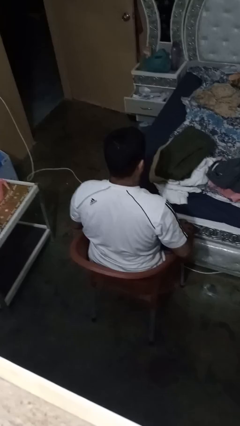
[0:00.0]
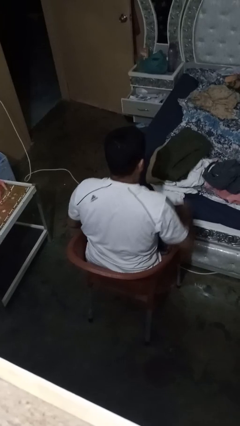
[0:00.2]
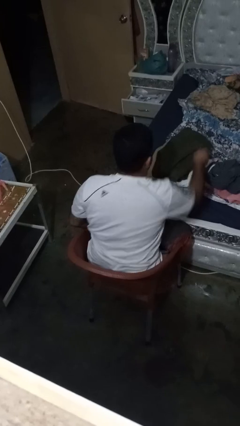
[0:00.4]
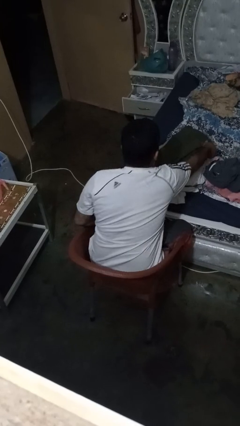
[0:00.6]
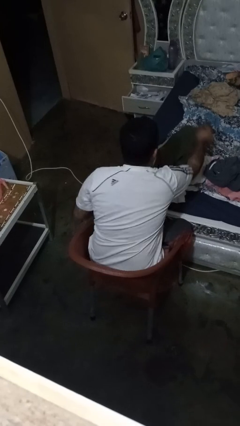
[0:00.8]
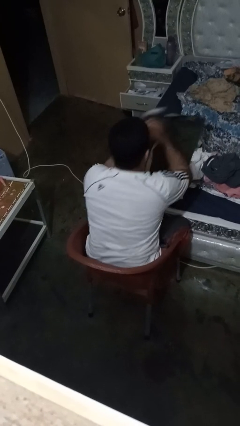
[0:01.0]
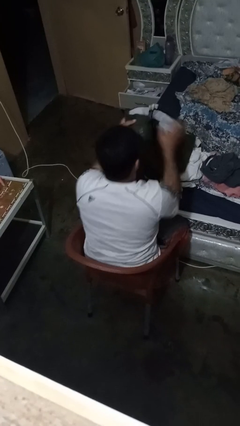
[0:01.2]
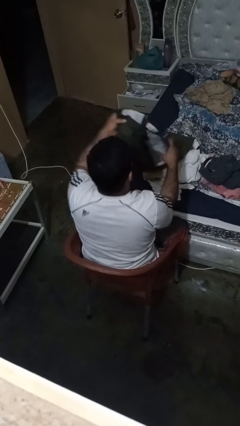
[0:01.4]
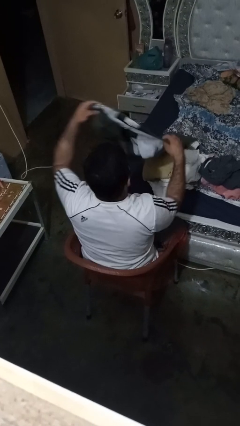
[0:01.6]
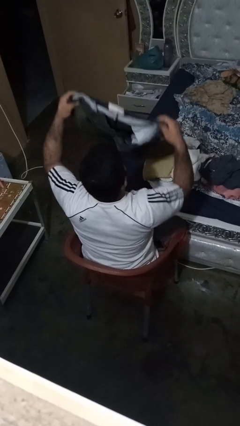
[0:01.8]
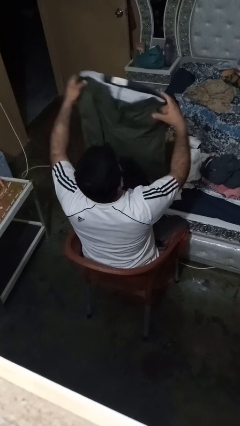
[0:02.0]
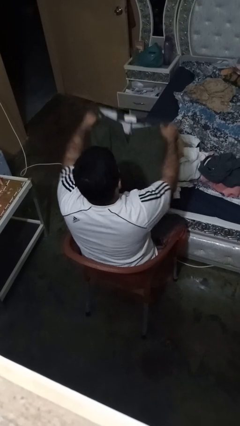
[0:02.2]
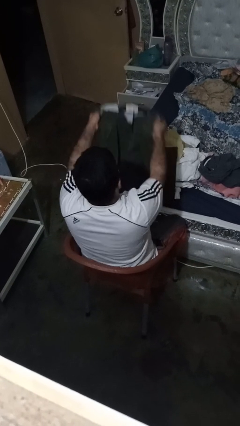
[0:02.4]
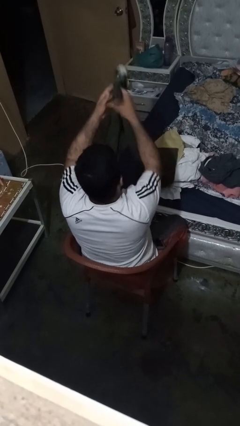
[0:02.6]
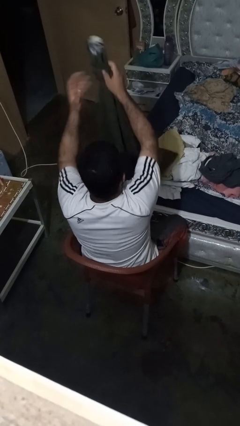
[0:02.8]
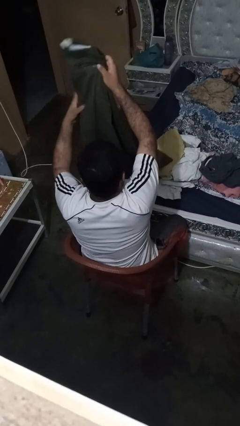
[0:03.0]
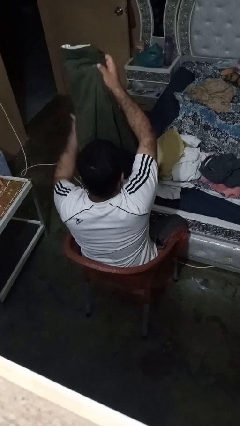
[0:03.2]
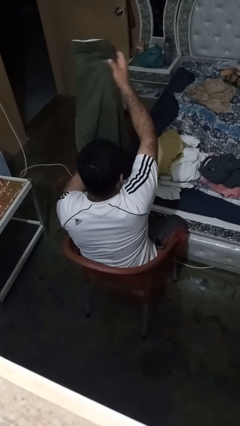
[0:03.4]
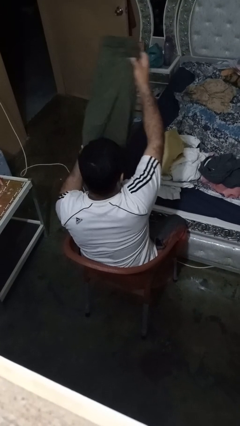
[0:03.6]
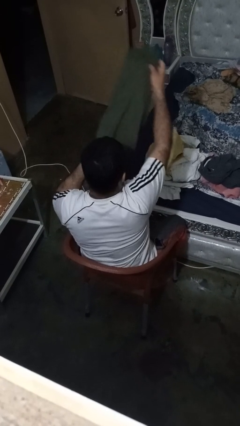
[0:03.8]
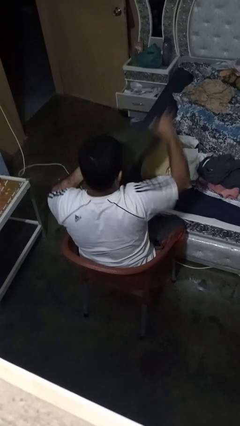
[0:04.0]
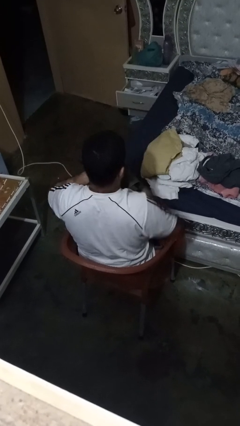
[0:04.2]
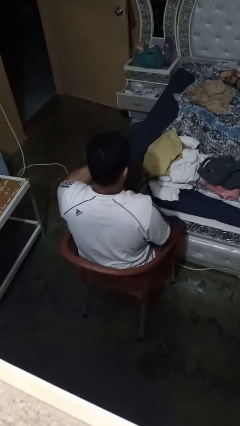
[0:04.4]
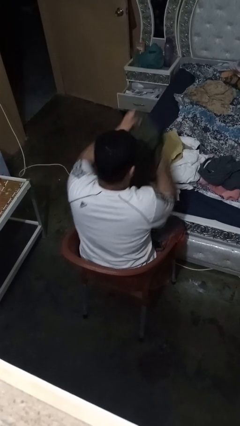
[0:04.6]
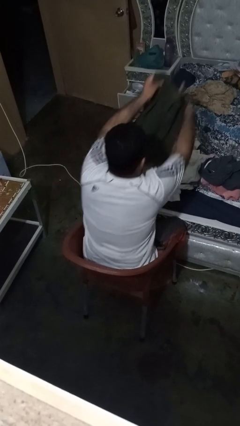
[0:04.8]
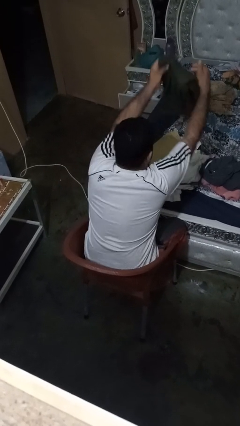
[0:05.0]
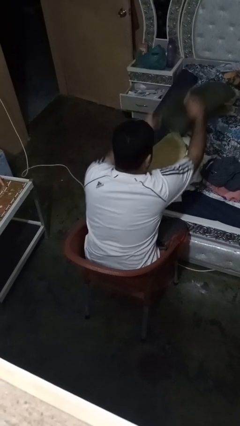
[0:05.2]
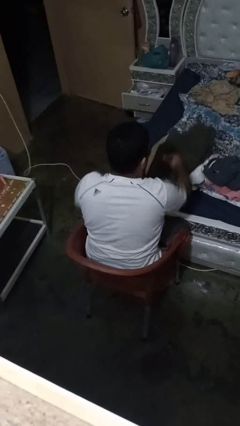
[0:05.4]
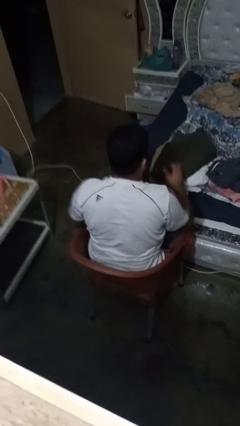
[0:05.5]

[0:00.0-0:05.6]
person folds pants

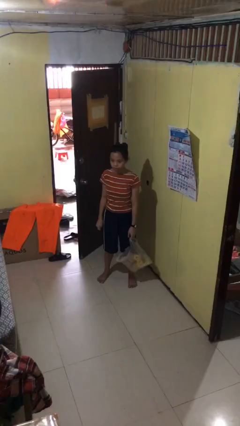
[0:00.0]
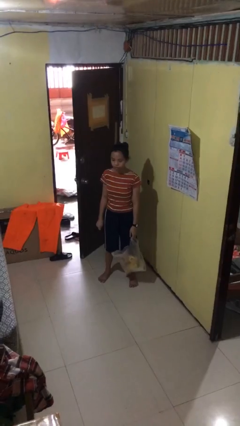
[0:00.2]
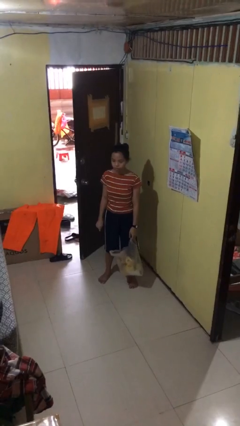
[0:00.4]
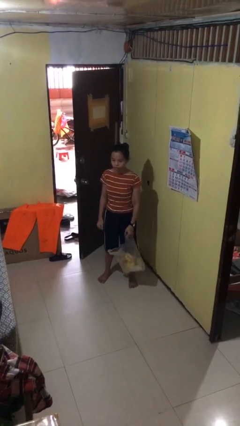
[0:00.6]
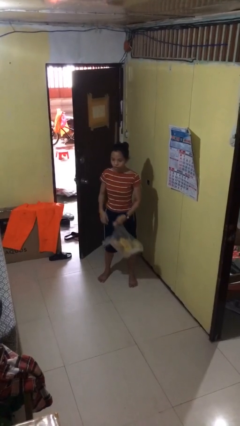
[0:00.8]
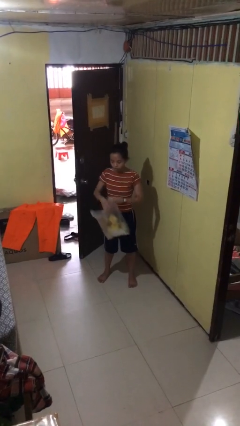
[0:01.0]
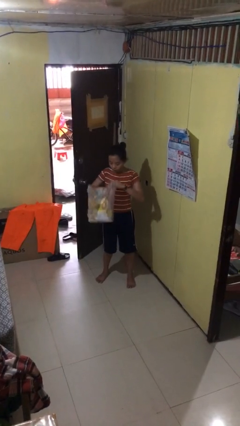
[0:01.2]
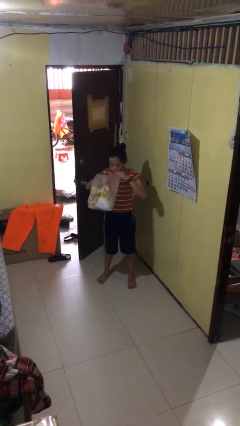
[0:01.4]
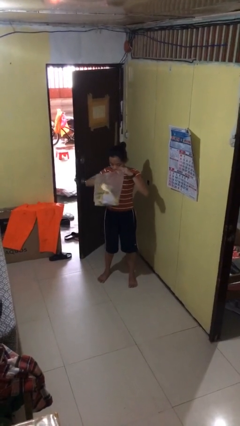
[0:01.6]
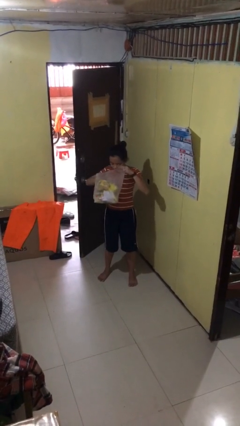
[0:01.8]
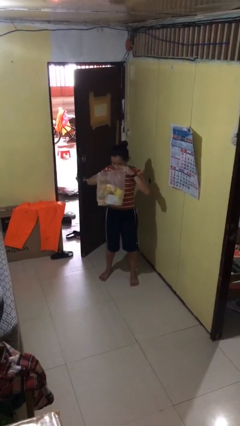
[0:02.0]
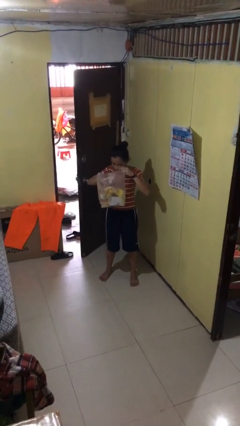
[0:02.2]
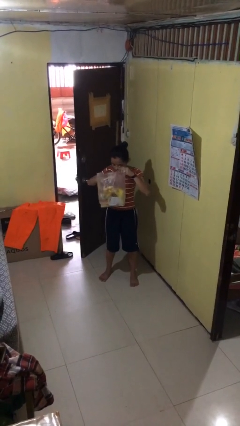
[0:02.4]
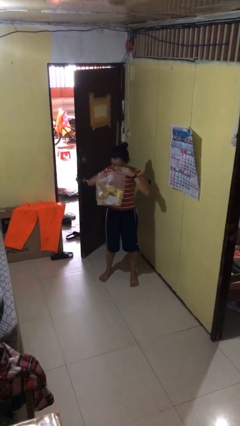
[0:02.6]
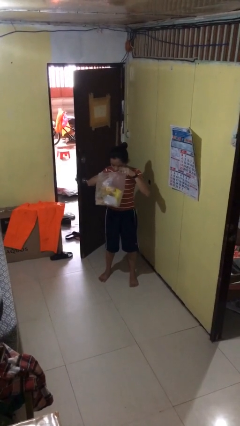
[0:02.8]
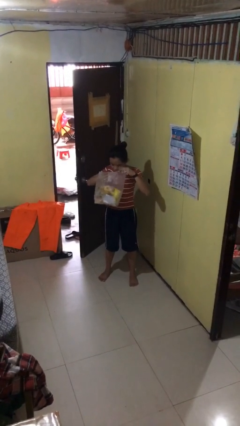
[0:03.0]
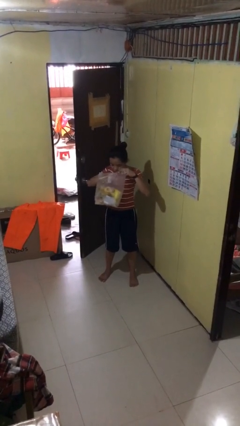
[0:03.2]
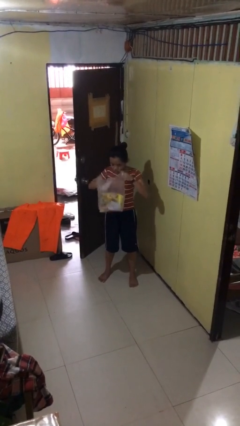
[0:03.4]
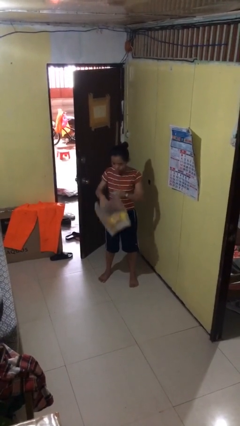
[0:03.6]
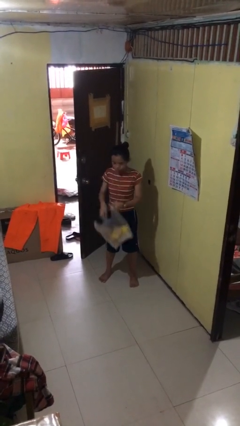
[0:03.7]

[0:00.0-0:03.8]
person searches in bag

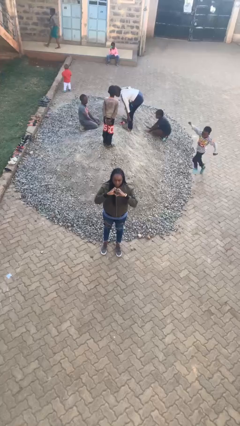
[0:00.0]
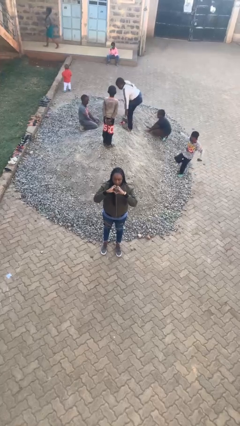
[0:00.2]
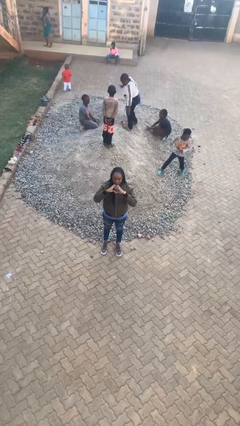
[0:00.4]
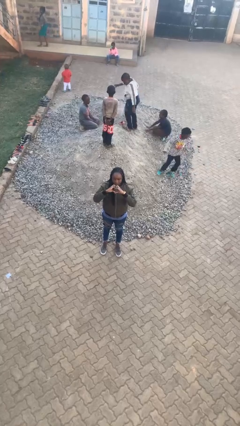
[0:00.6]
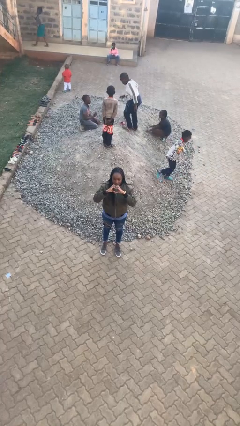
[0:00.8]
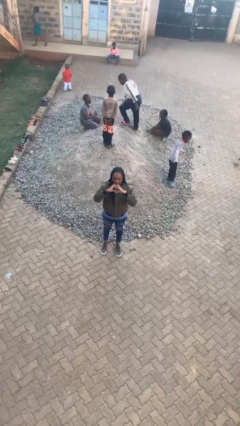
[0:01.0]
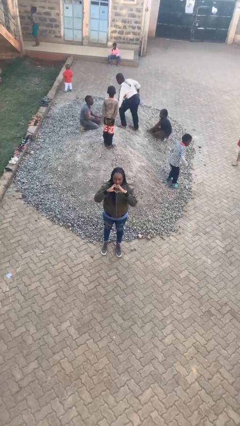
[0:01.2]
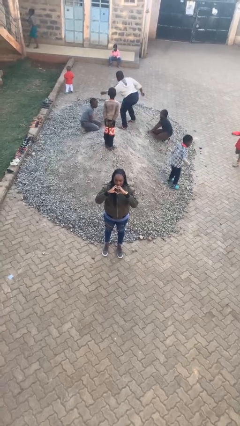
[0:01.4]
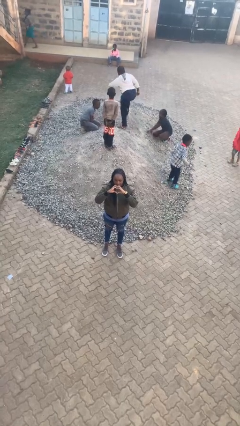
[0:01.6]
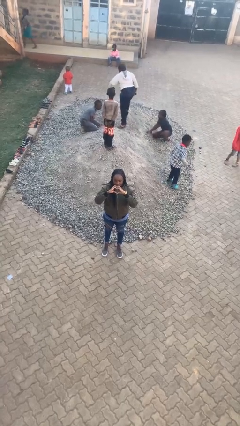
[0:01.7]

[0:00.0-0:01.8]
person gestures heart

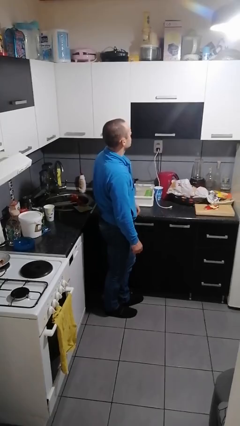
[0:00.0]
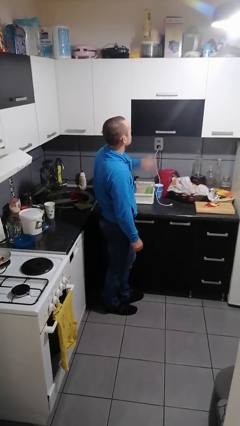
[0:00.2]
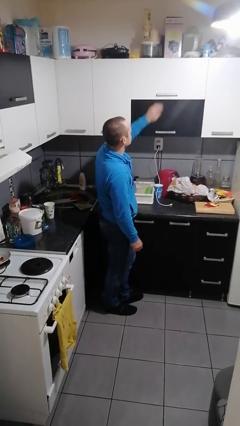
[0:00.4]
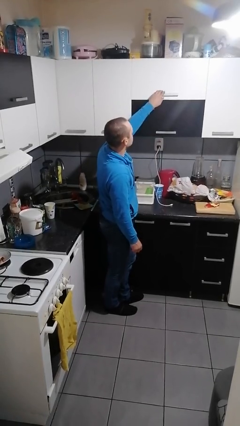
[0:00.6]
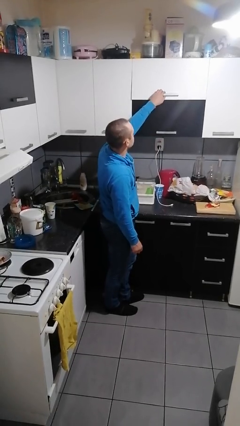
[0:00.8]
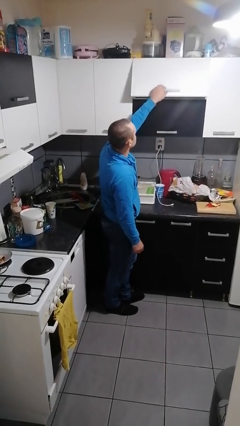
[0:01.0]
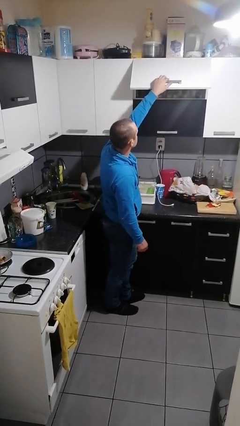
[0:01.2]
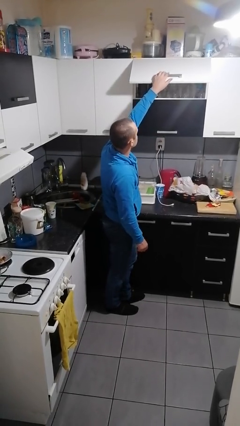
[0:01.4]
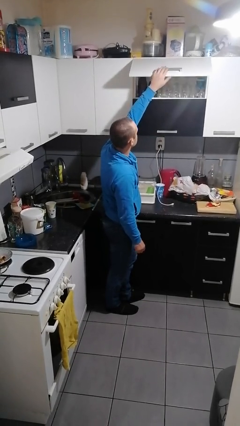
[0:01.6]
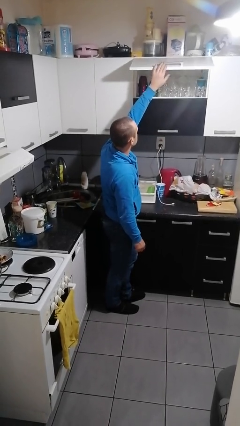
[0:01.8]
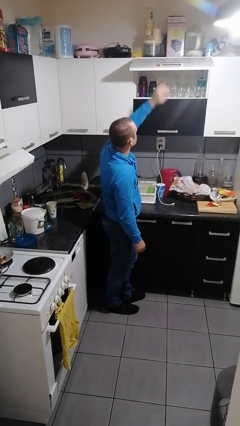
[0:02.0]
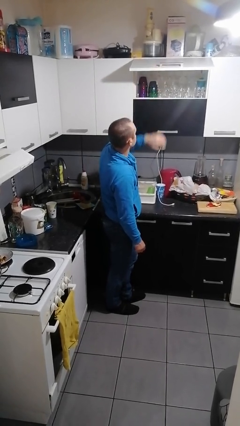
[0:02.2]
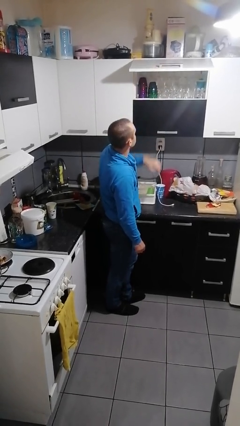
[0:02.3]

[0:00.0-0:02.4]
person opens cabinet

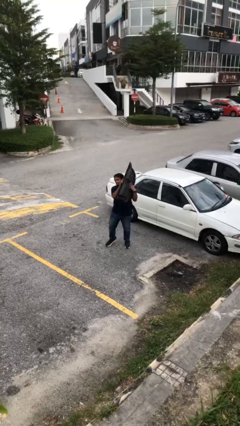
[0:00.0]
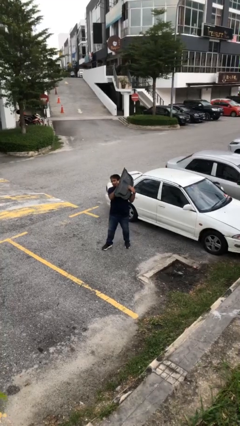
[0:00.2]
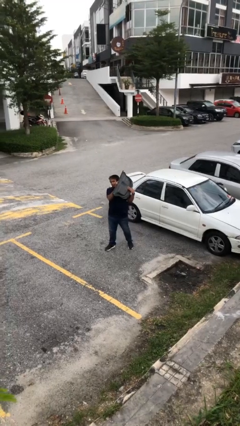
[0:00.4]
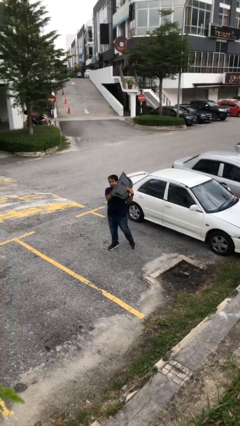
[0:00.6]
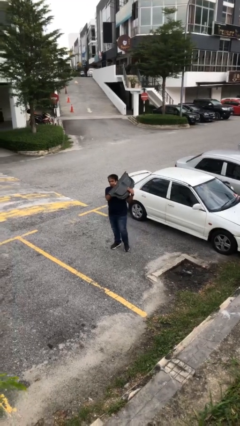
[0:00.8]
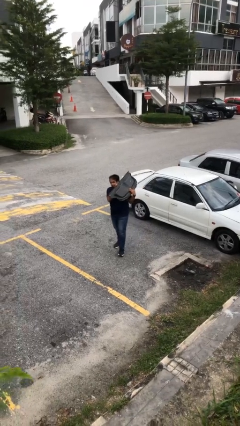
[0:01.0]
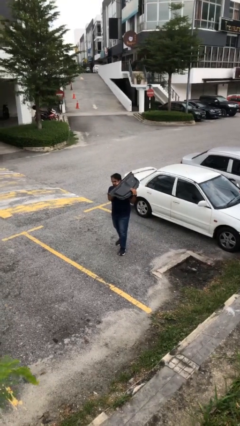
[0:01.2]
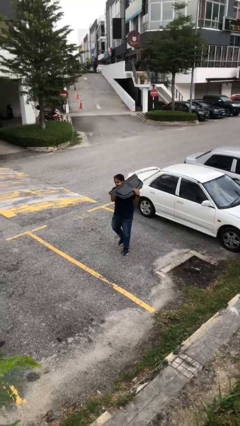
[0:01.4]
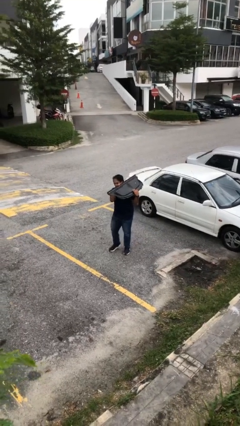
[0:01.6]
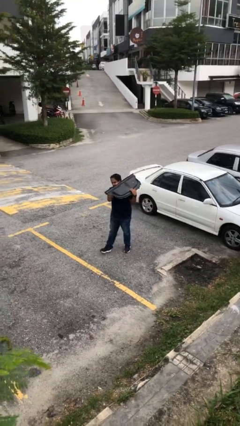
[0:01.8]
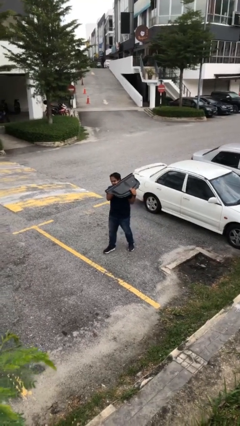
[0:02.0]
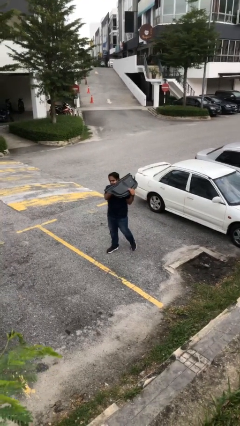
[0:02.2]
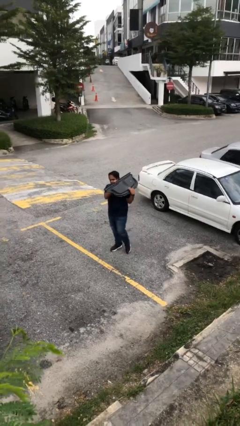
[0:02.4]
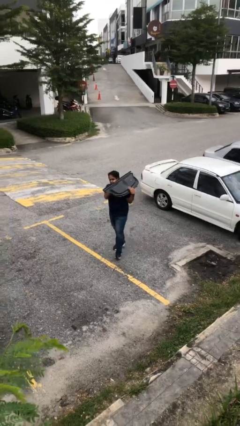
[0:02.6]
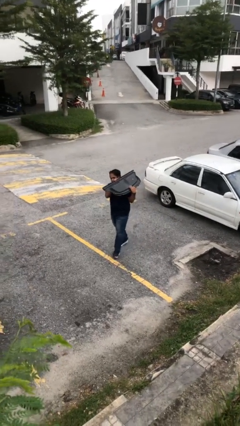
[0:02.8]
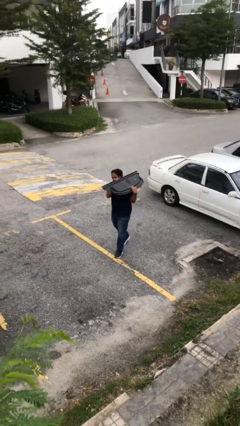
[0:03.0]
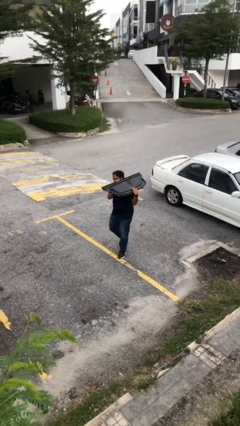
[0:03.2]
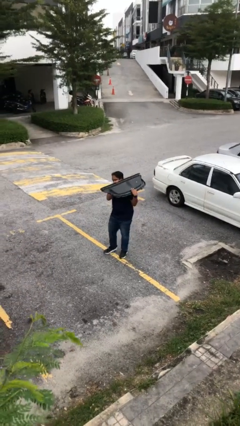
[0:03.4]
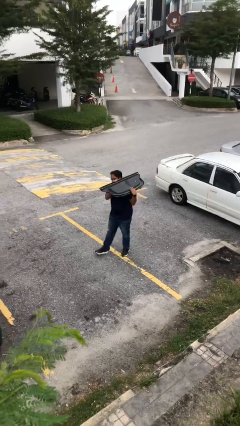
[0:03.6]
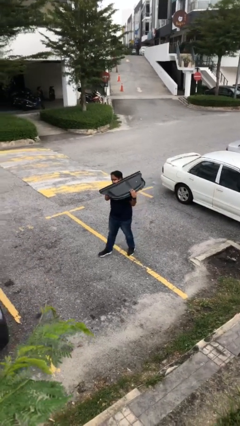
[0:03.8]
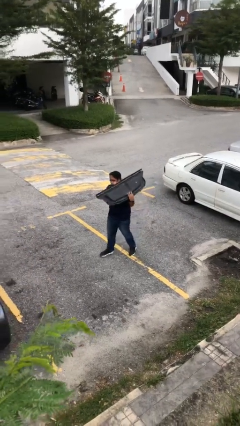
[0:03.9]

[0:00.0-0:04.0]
person carries heavy object
